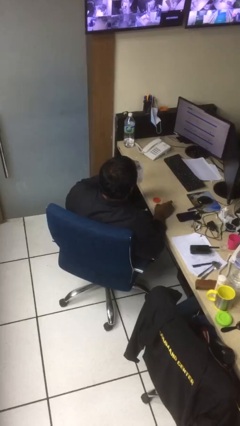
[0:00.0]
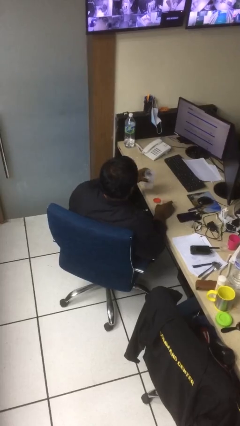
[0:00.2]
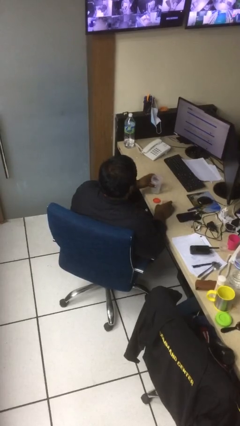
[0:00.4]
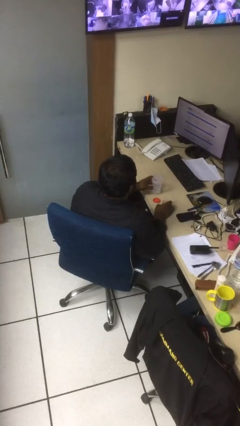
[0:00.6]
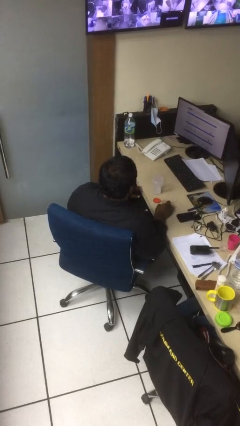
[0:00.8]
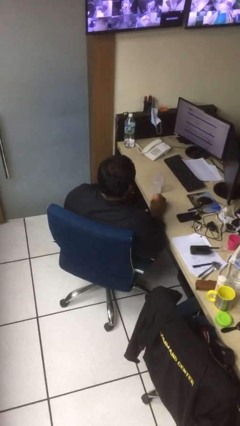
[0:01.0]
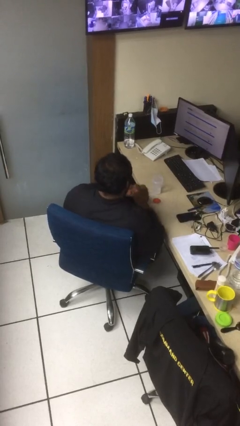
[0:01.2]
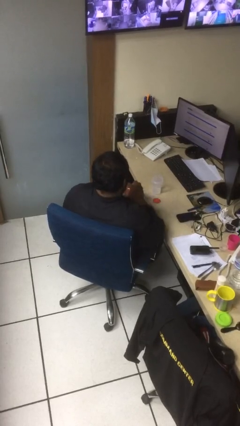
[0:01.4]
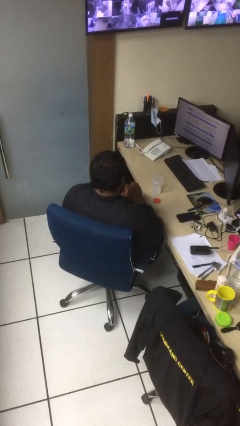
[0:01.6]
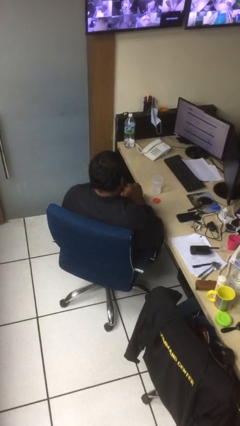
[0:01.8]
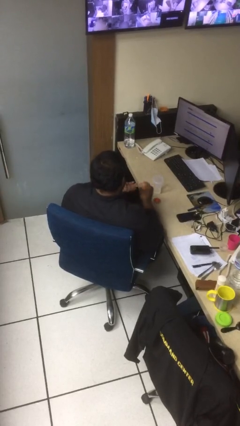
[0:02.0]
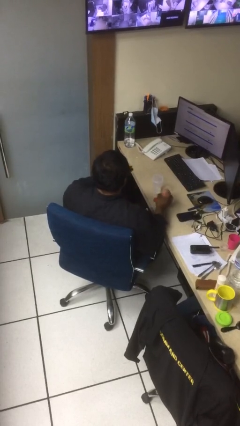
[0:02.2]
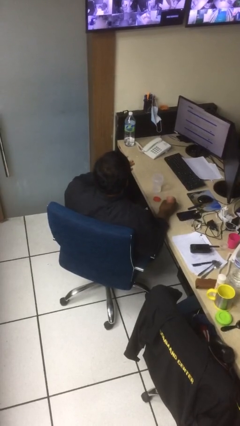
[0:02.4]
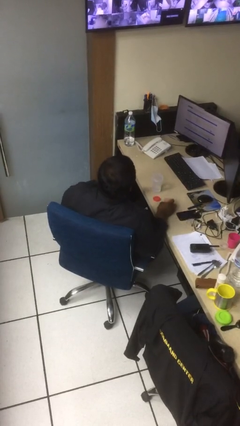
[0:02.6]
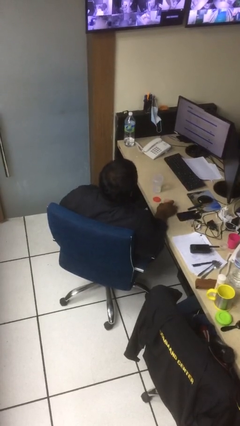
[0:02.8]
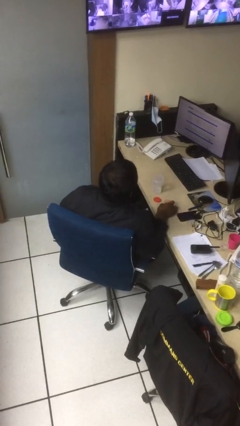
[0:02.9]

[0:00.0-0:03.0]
person takes medicine pills

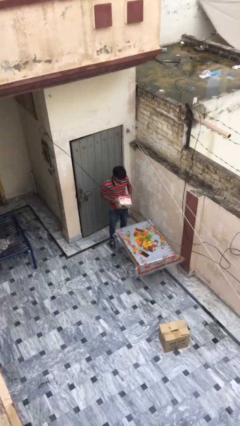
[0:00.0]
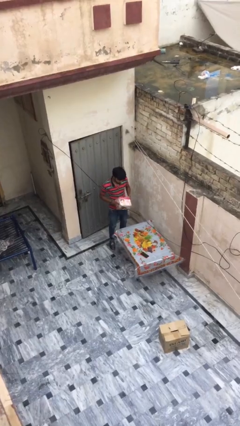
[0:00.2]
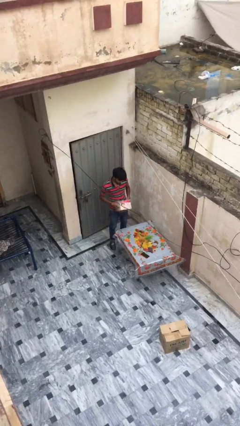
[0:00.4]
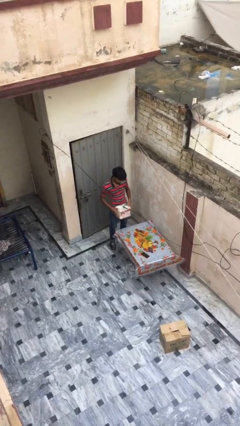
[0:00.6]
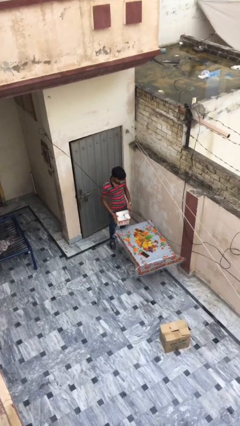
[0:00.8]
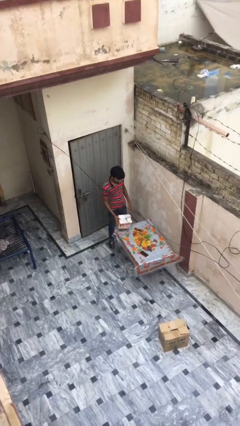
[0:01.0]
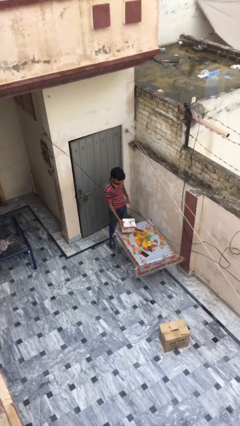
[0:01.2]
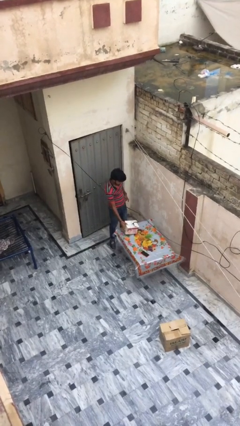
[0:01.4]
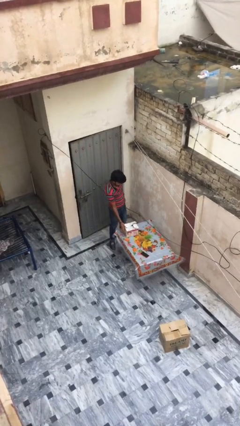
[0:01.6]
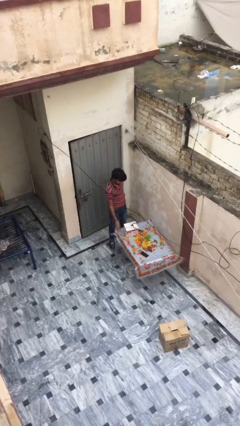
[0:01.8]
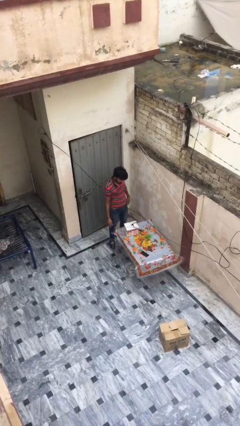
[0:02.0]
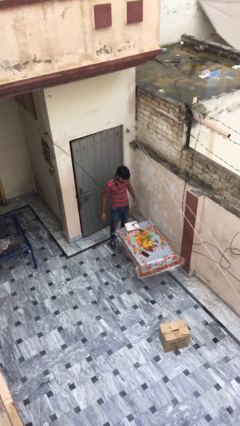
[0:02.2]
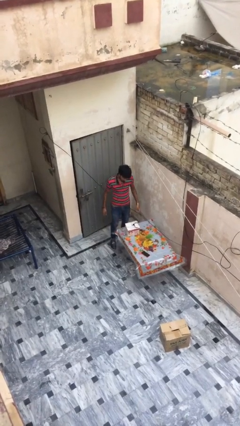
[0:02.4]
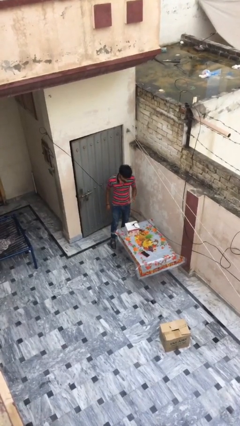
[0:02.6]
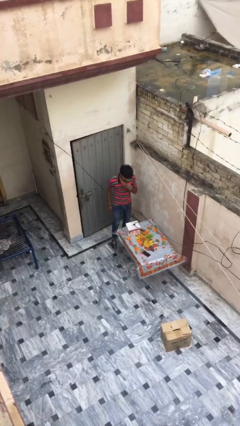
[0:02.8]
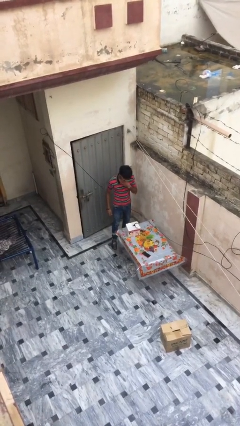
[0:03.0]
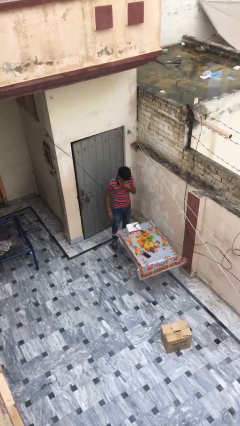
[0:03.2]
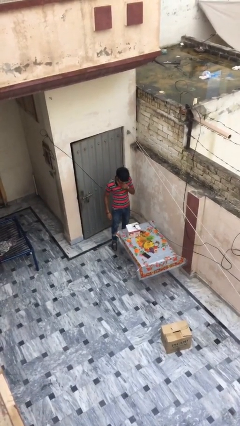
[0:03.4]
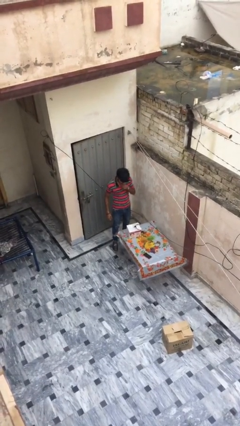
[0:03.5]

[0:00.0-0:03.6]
person puts down object on table

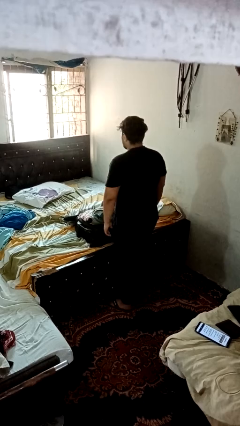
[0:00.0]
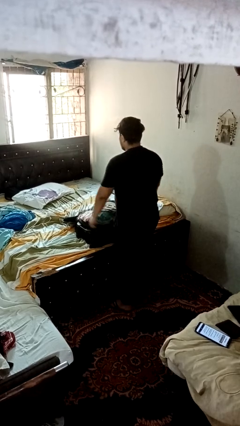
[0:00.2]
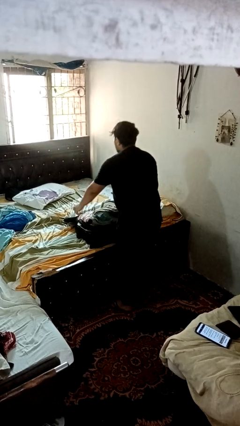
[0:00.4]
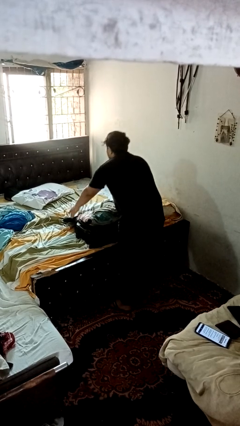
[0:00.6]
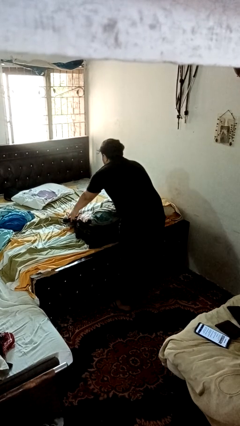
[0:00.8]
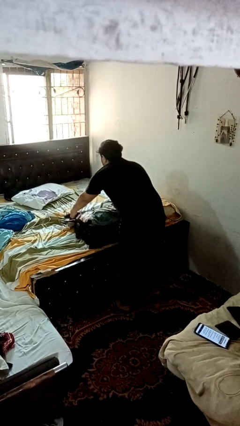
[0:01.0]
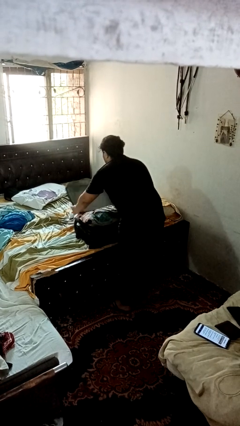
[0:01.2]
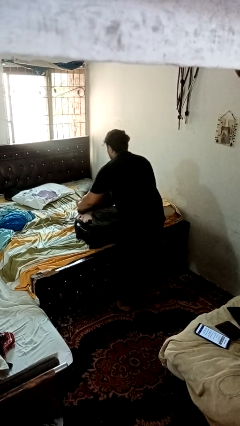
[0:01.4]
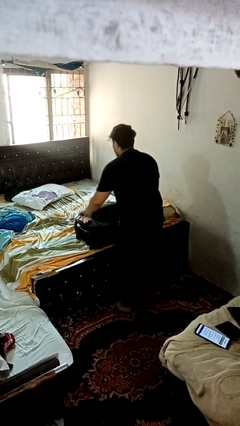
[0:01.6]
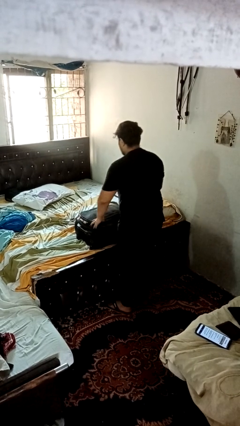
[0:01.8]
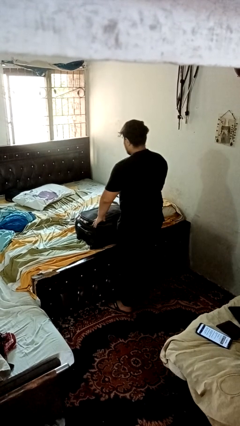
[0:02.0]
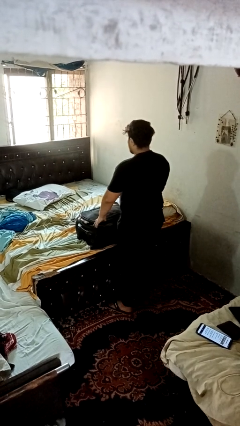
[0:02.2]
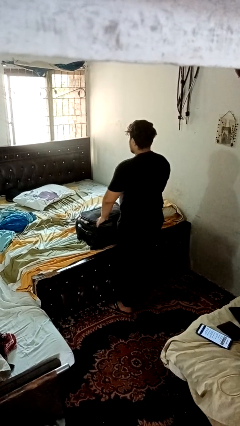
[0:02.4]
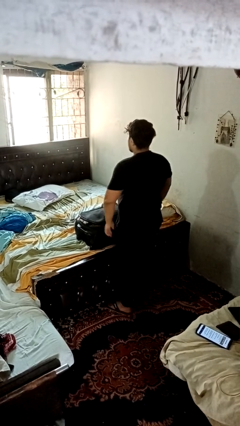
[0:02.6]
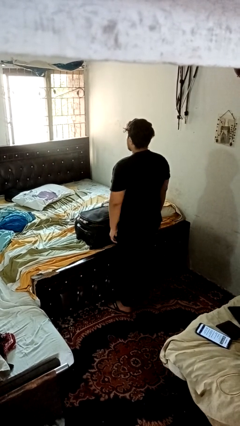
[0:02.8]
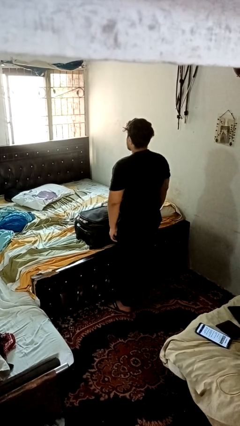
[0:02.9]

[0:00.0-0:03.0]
person closes suitcase

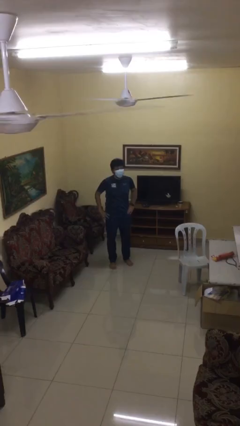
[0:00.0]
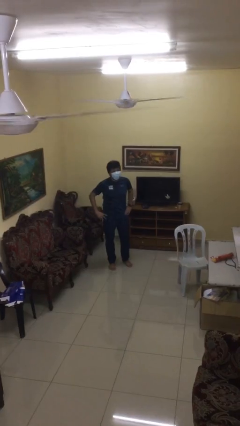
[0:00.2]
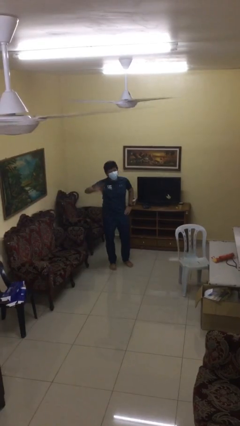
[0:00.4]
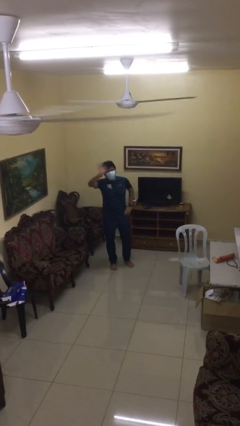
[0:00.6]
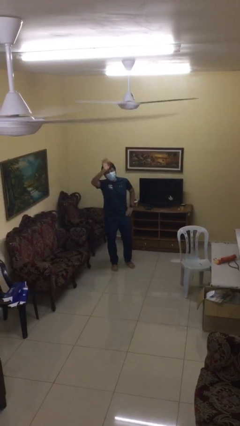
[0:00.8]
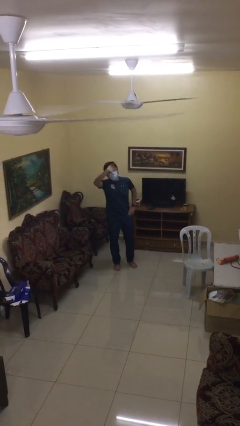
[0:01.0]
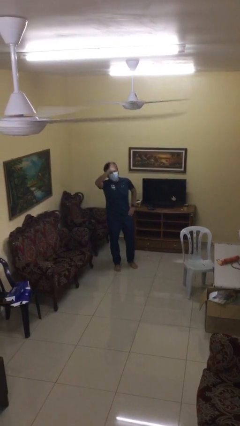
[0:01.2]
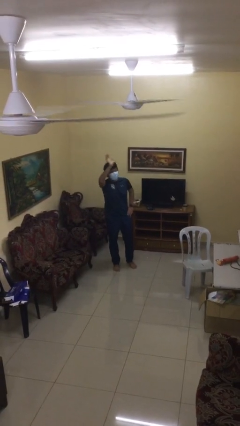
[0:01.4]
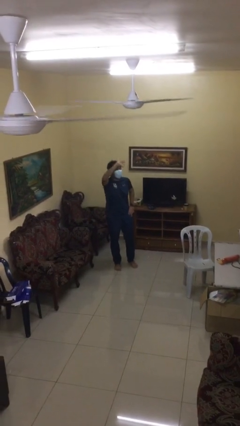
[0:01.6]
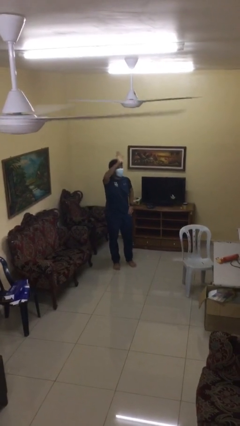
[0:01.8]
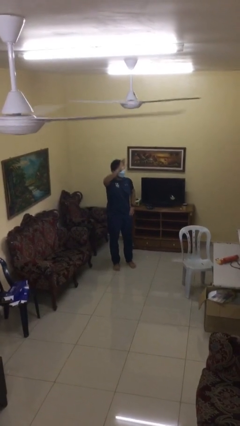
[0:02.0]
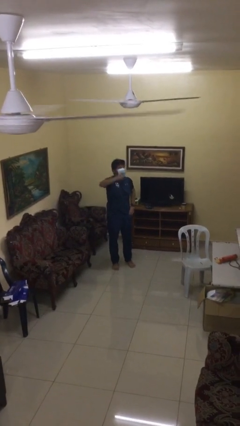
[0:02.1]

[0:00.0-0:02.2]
person waves at person

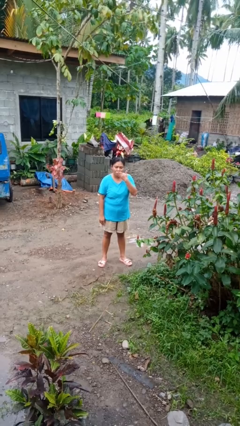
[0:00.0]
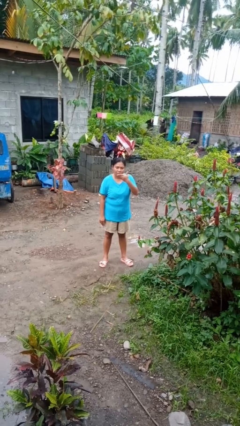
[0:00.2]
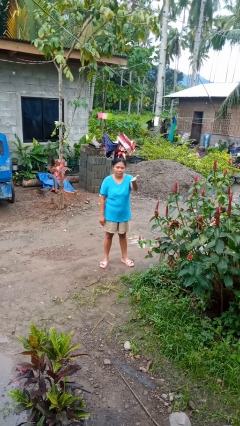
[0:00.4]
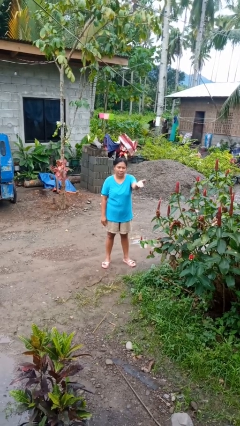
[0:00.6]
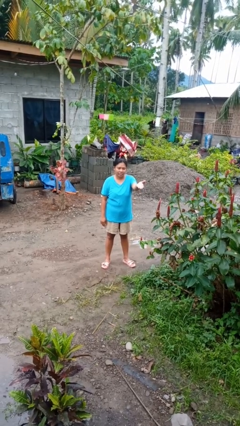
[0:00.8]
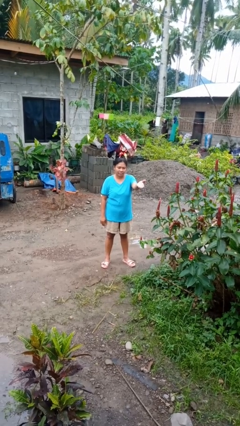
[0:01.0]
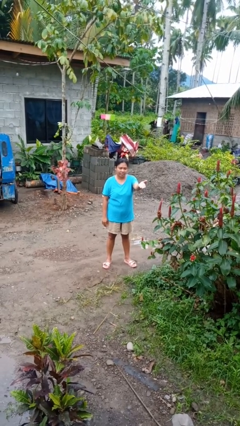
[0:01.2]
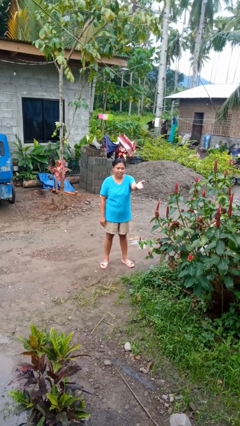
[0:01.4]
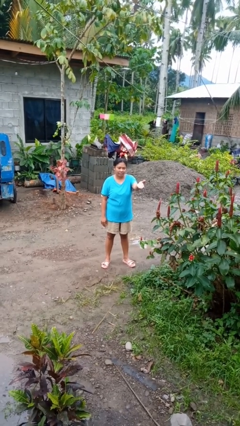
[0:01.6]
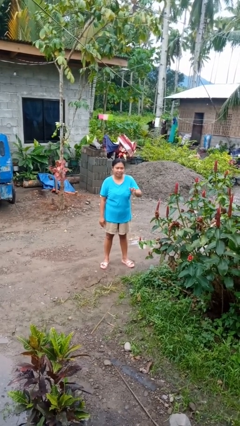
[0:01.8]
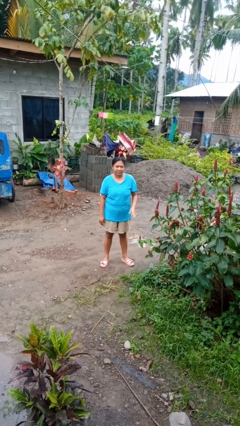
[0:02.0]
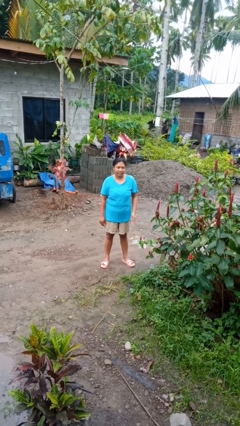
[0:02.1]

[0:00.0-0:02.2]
person gestures blow kiss

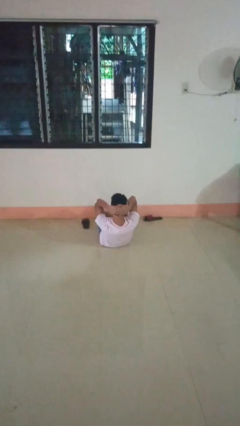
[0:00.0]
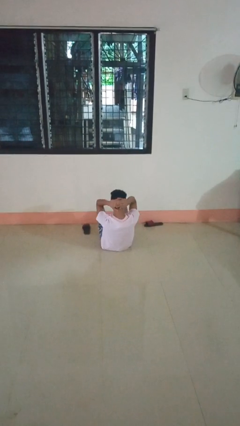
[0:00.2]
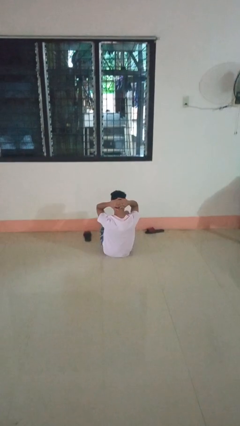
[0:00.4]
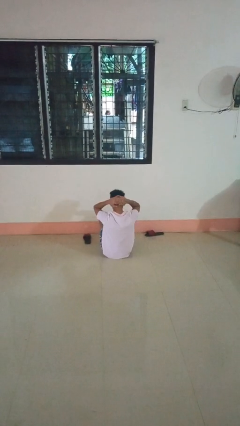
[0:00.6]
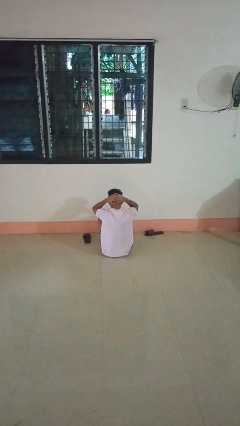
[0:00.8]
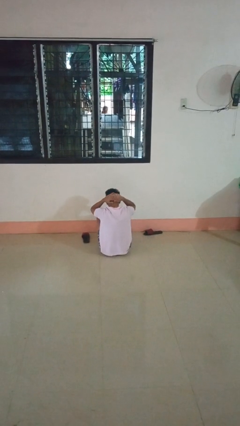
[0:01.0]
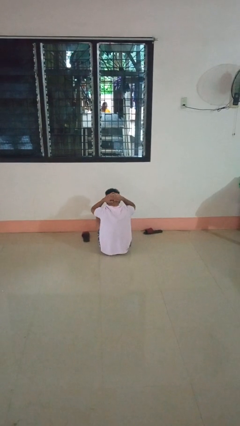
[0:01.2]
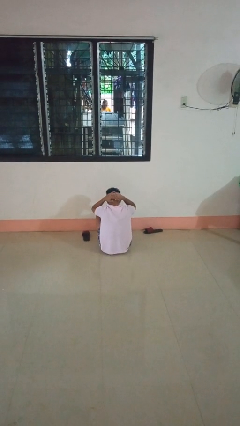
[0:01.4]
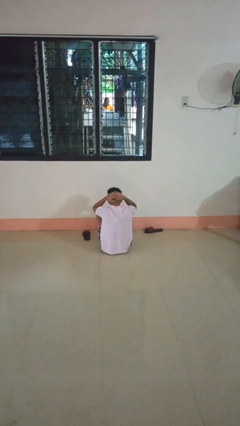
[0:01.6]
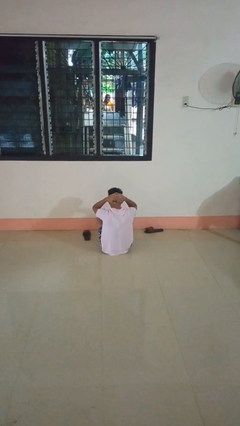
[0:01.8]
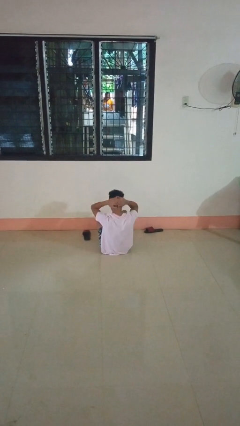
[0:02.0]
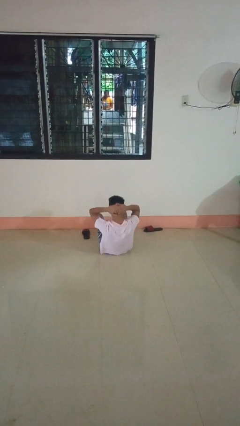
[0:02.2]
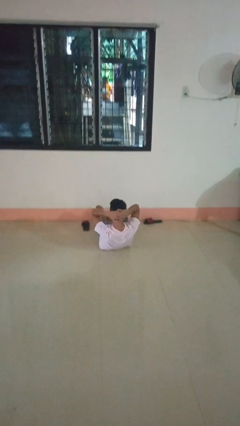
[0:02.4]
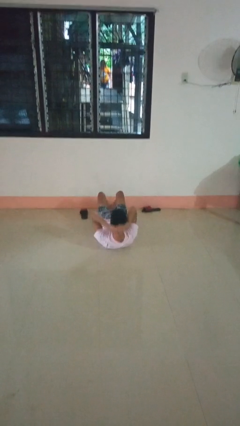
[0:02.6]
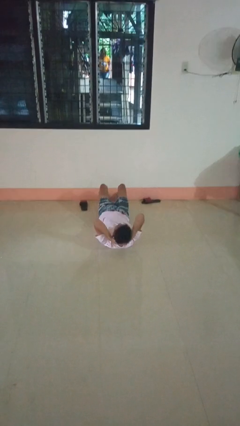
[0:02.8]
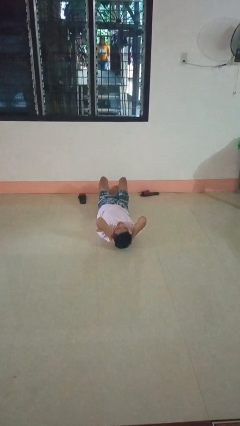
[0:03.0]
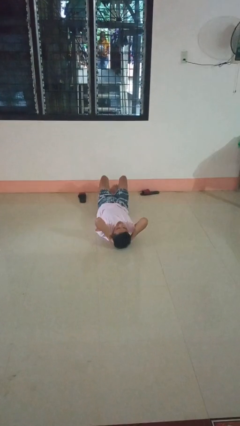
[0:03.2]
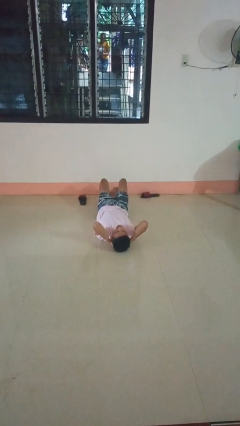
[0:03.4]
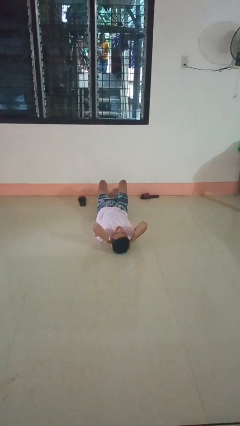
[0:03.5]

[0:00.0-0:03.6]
person exercises with situp
